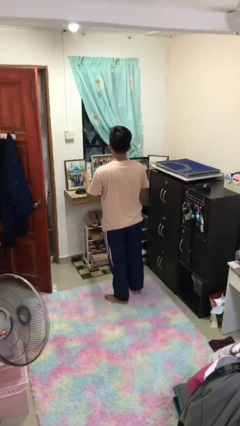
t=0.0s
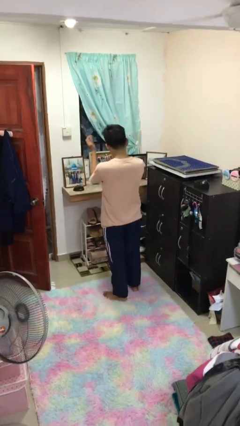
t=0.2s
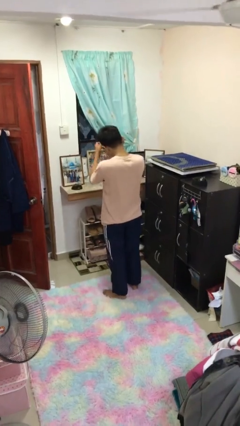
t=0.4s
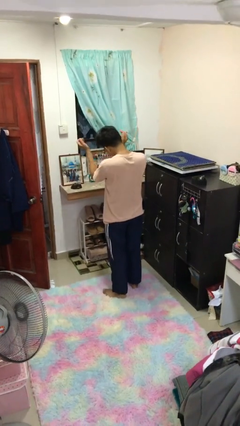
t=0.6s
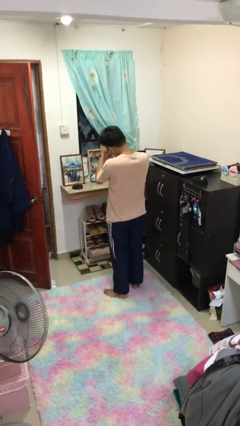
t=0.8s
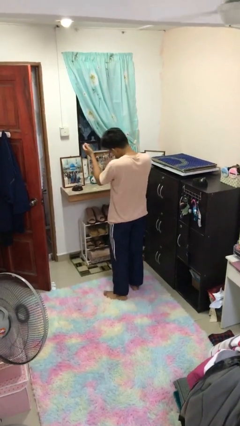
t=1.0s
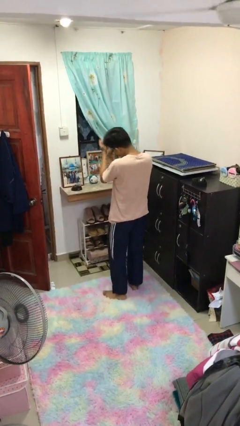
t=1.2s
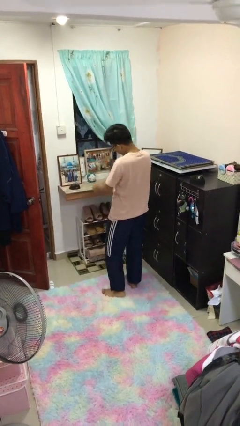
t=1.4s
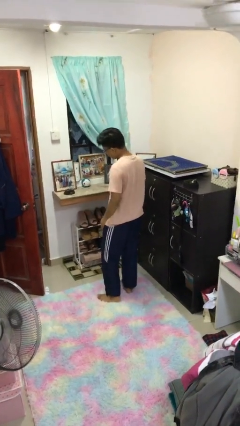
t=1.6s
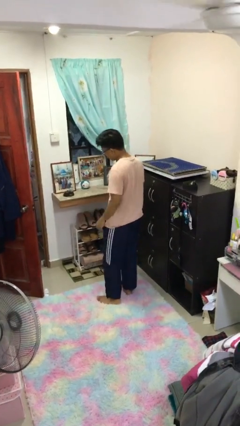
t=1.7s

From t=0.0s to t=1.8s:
person claps hands

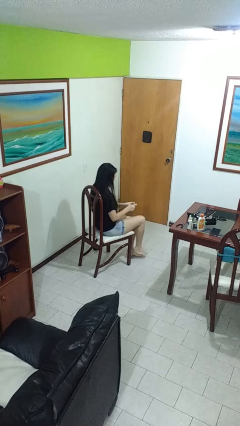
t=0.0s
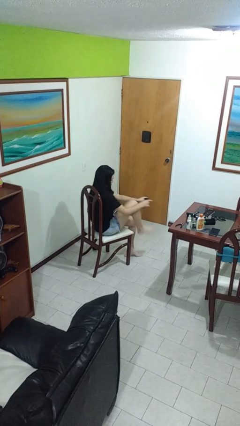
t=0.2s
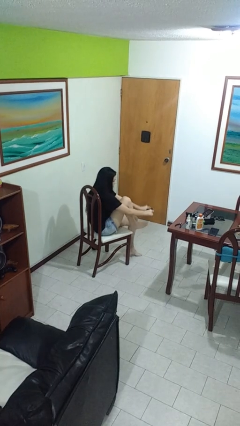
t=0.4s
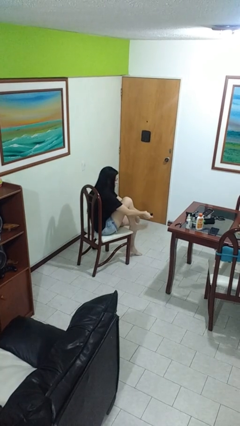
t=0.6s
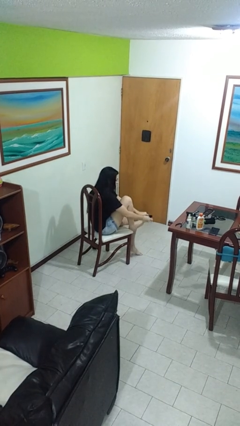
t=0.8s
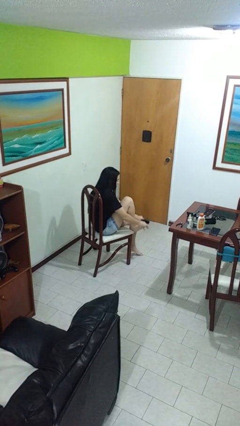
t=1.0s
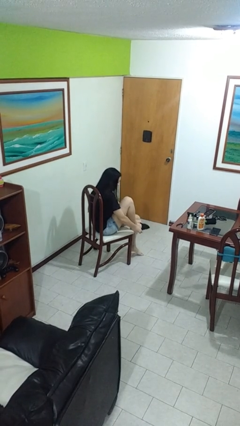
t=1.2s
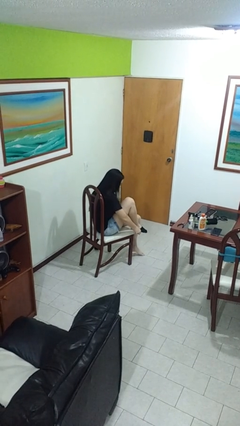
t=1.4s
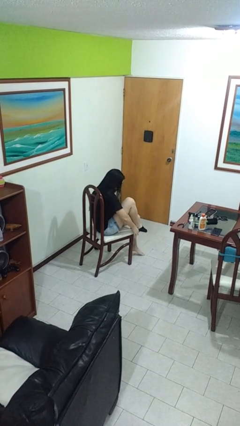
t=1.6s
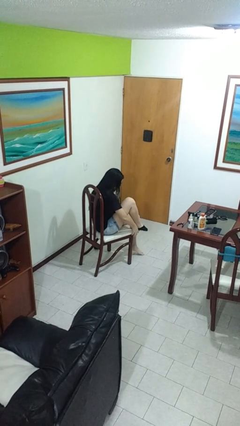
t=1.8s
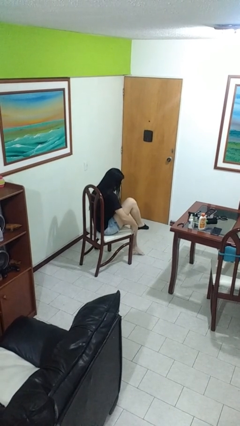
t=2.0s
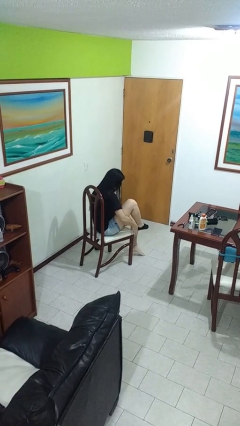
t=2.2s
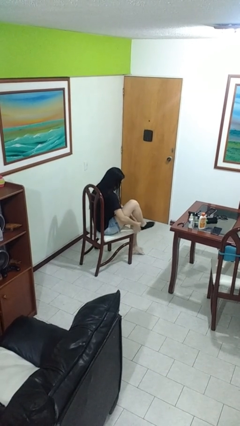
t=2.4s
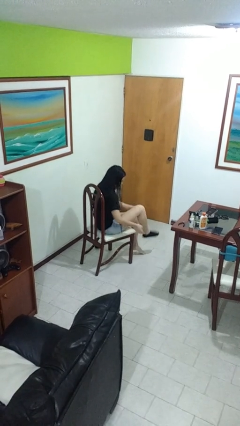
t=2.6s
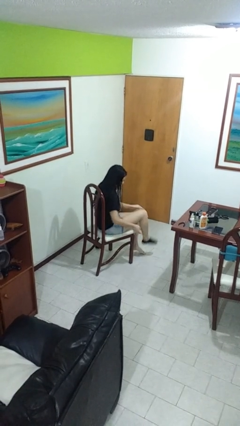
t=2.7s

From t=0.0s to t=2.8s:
person puts on socks

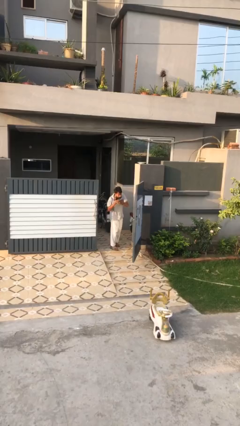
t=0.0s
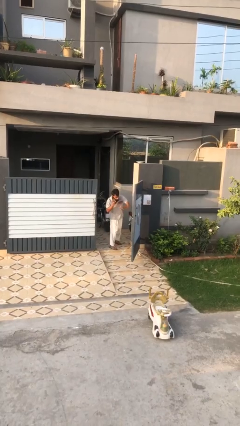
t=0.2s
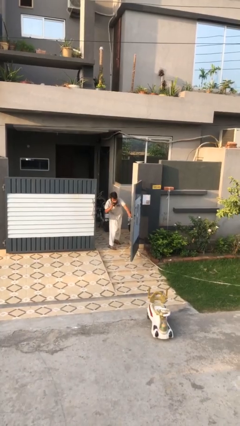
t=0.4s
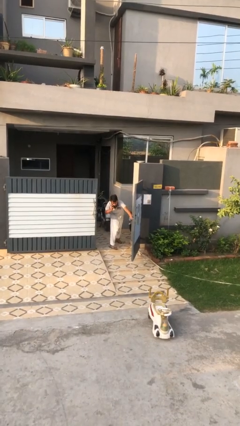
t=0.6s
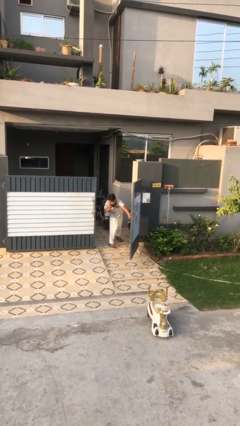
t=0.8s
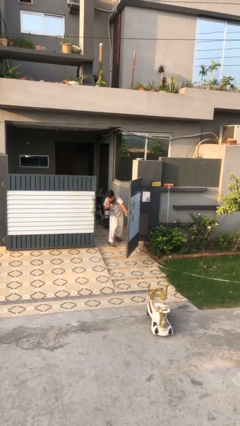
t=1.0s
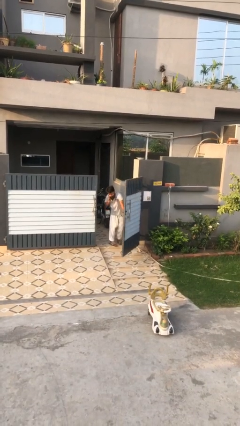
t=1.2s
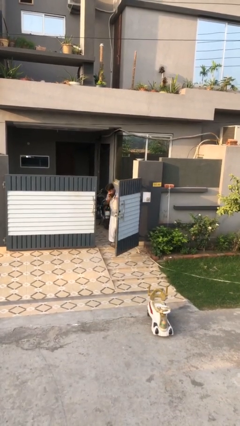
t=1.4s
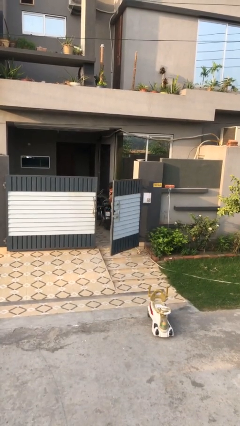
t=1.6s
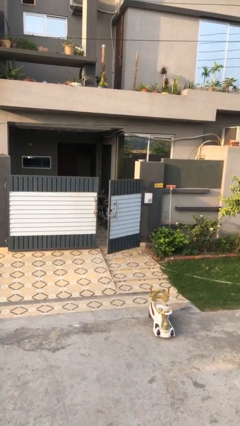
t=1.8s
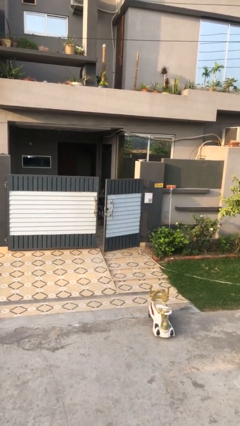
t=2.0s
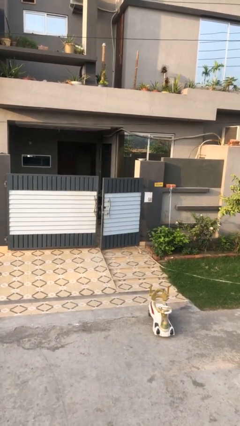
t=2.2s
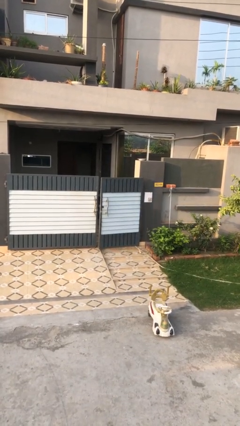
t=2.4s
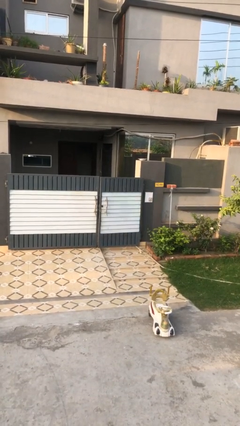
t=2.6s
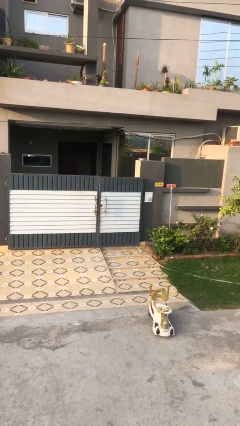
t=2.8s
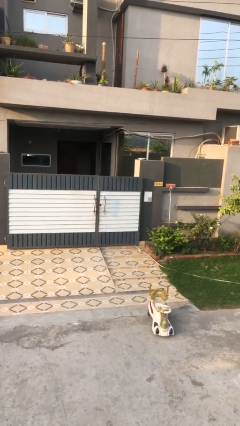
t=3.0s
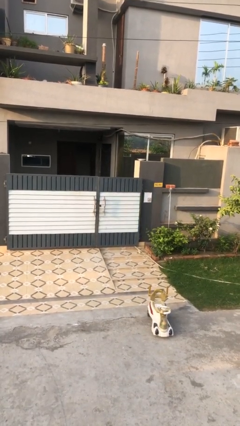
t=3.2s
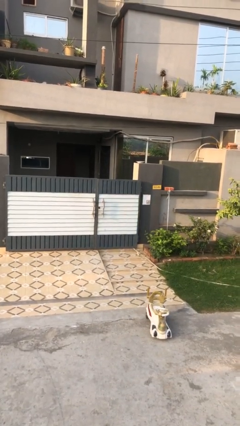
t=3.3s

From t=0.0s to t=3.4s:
person closes facility door

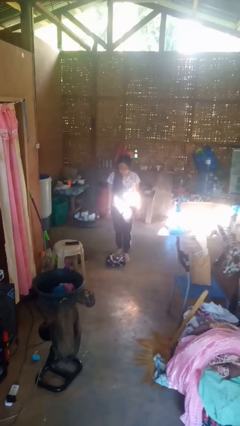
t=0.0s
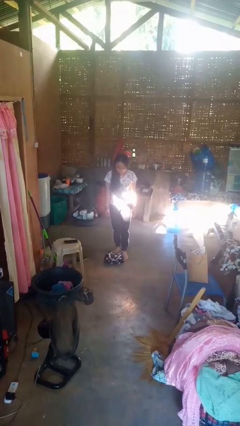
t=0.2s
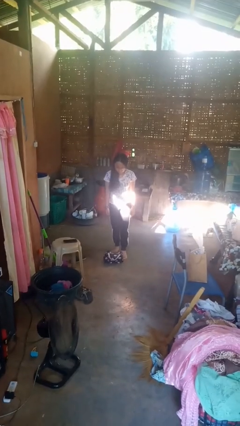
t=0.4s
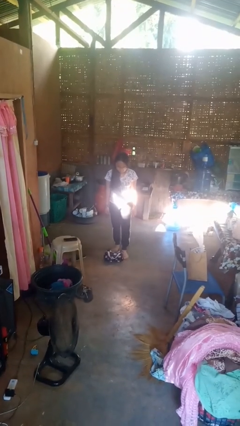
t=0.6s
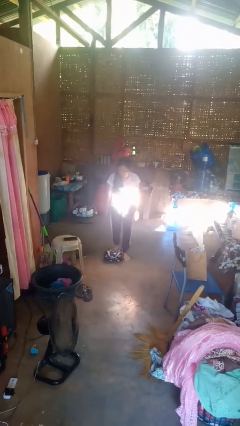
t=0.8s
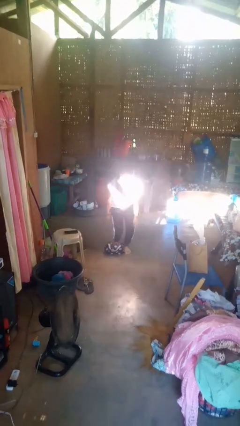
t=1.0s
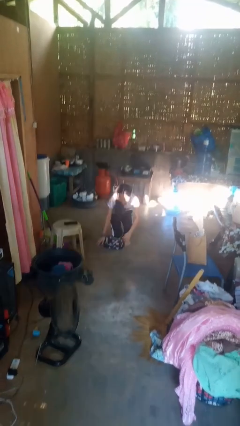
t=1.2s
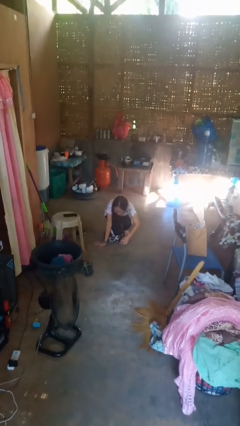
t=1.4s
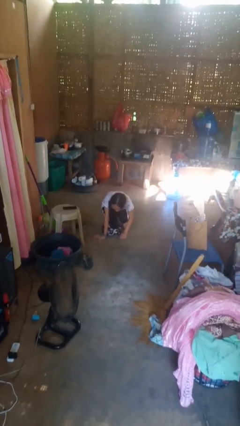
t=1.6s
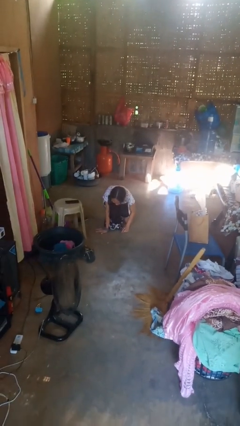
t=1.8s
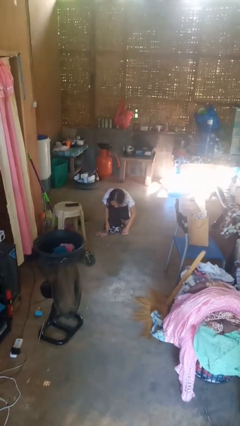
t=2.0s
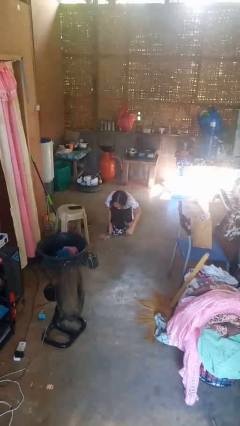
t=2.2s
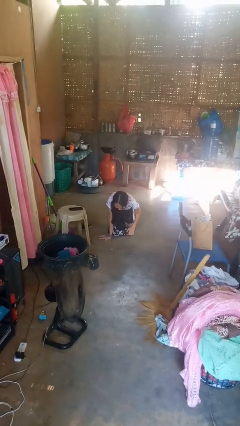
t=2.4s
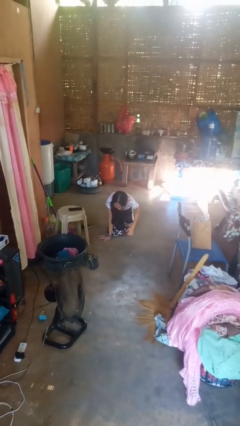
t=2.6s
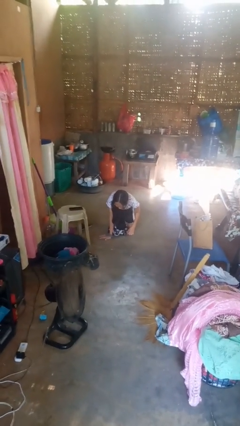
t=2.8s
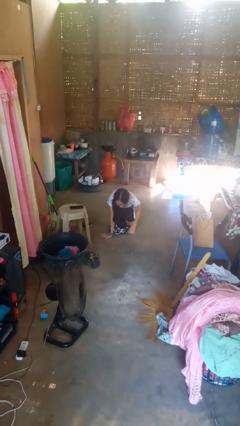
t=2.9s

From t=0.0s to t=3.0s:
person trips on object on floor

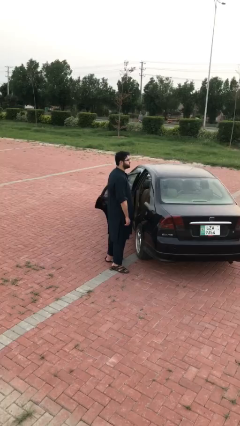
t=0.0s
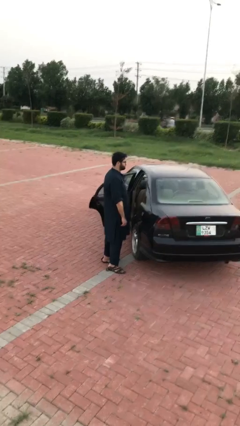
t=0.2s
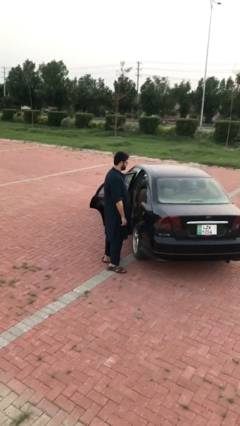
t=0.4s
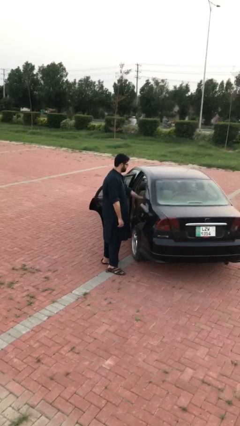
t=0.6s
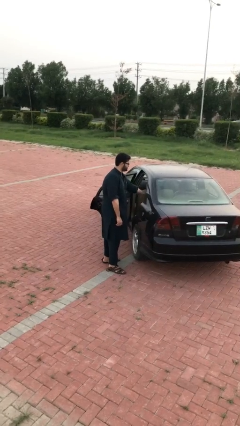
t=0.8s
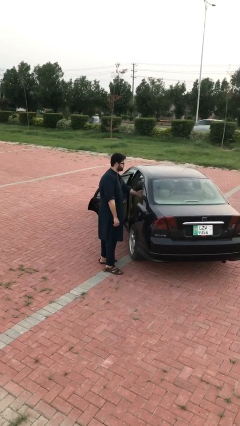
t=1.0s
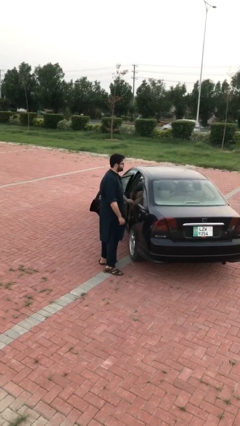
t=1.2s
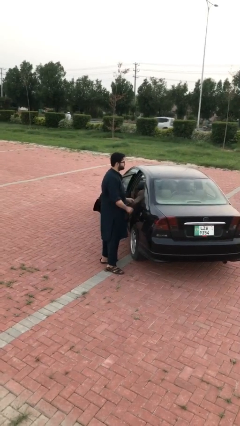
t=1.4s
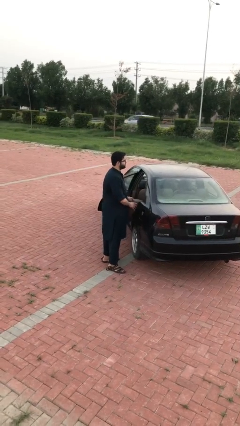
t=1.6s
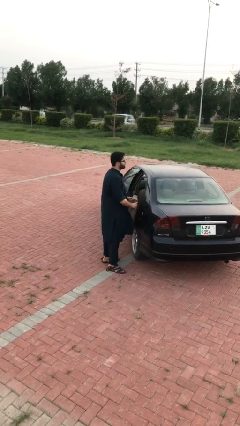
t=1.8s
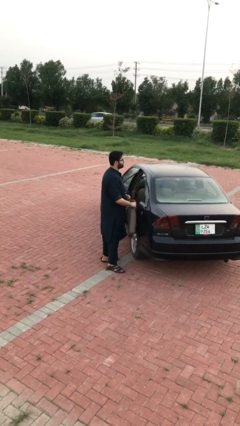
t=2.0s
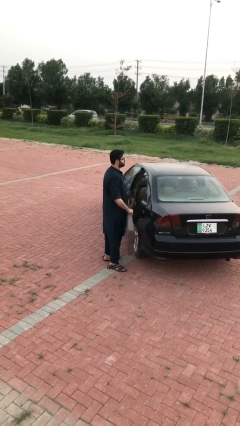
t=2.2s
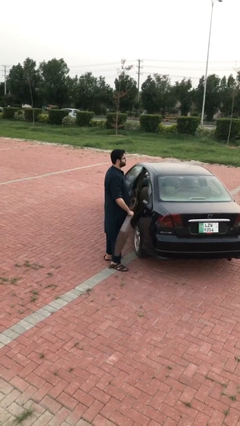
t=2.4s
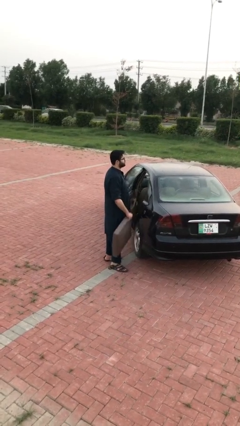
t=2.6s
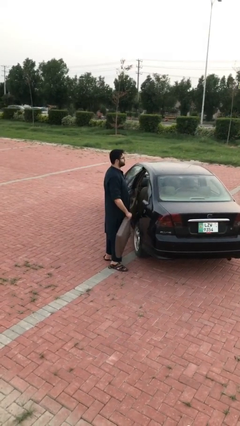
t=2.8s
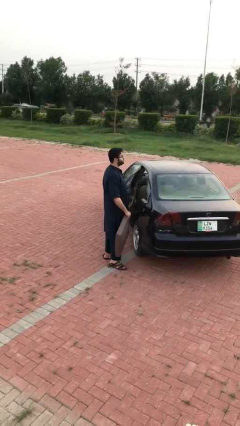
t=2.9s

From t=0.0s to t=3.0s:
person unloads car

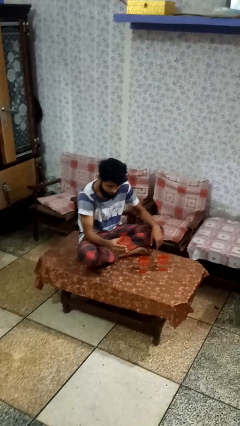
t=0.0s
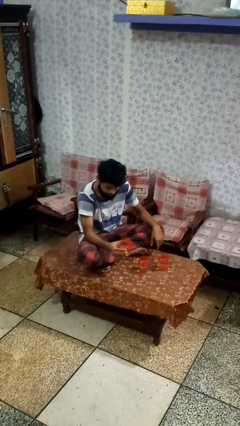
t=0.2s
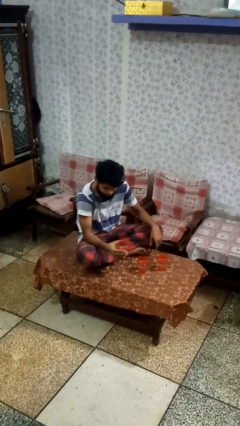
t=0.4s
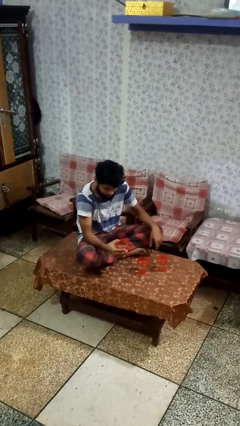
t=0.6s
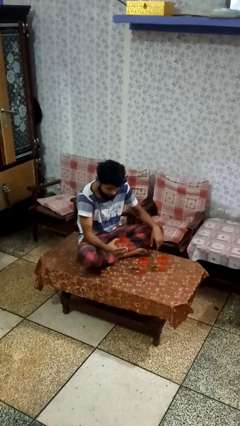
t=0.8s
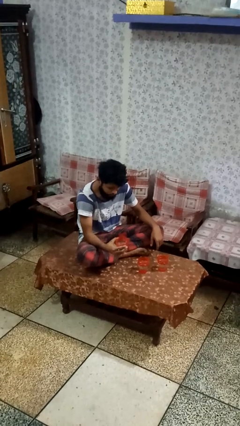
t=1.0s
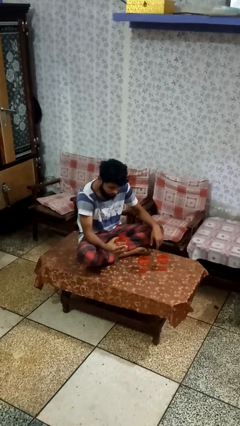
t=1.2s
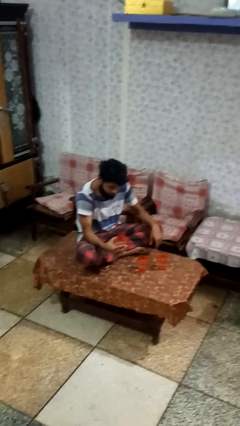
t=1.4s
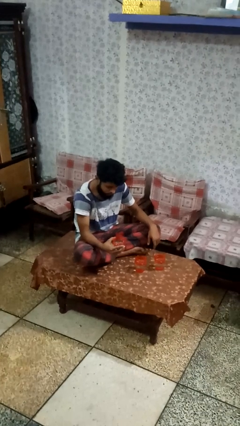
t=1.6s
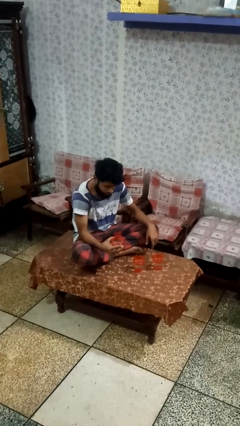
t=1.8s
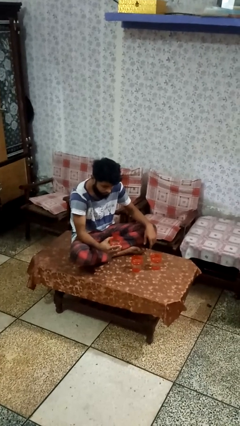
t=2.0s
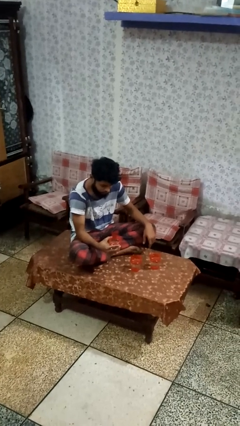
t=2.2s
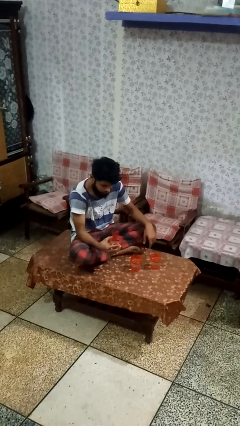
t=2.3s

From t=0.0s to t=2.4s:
person picks up object from table

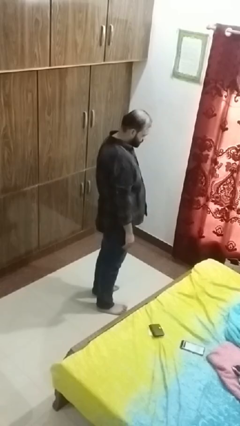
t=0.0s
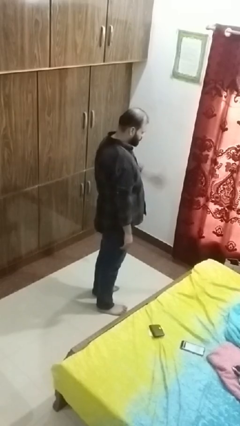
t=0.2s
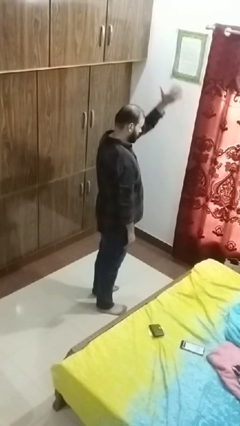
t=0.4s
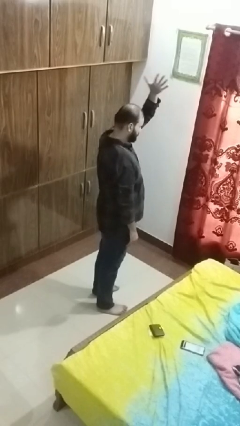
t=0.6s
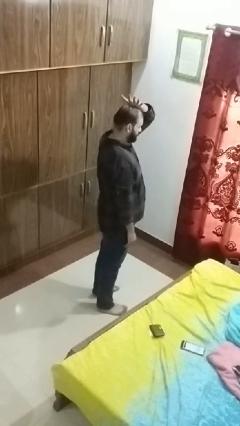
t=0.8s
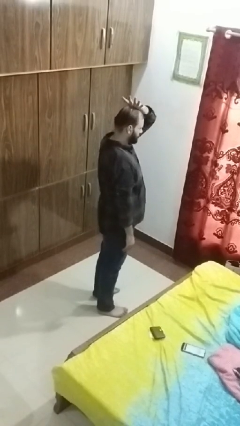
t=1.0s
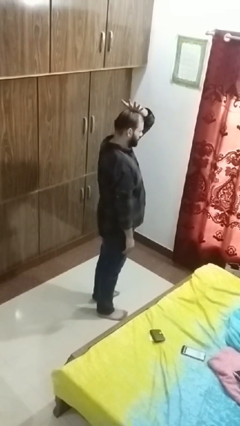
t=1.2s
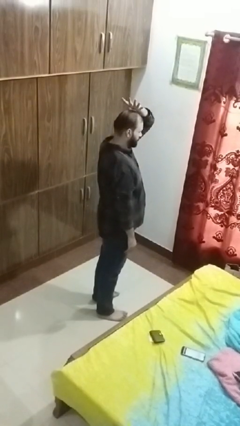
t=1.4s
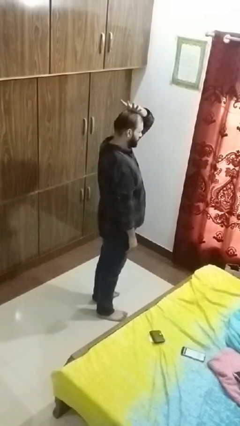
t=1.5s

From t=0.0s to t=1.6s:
person pats head
